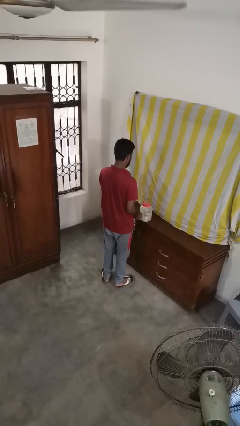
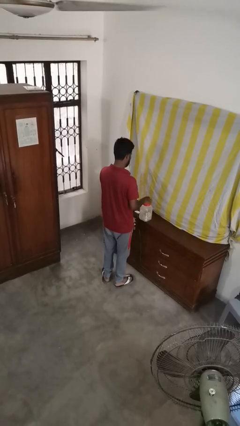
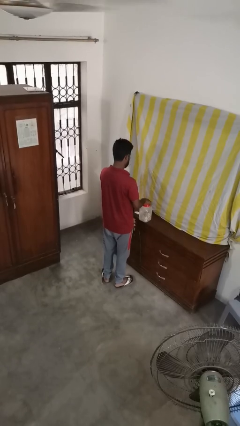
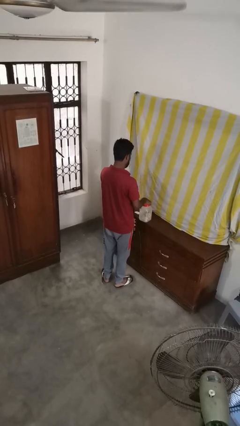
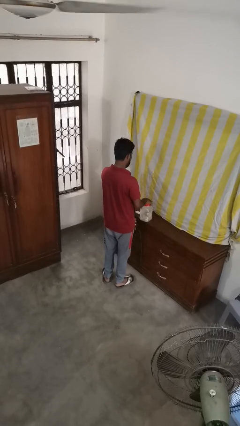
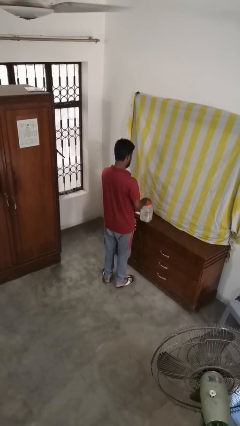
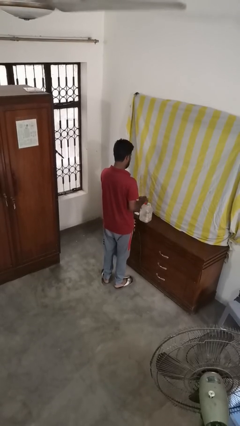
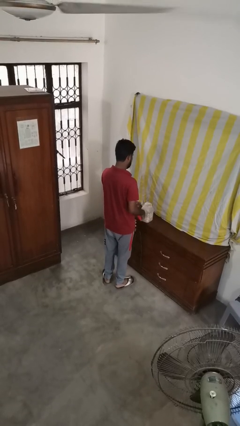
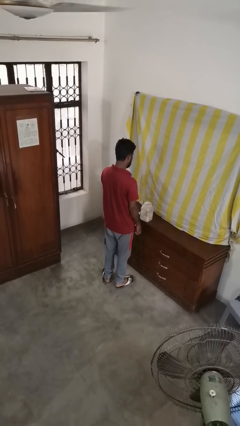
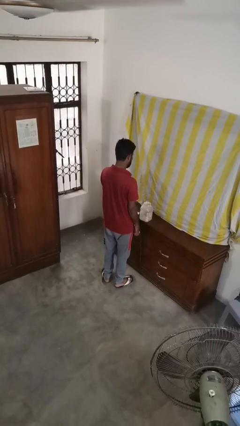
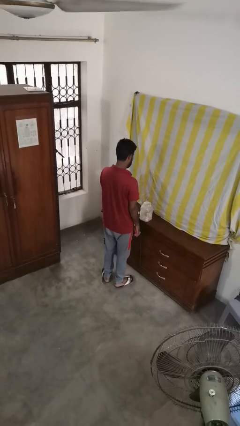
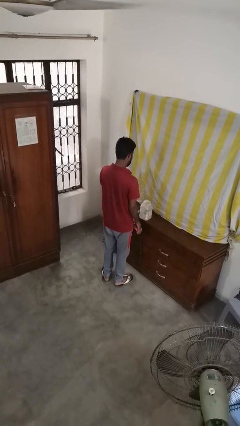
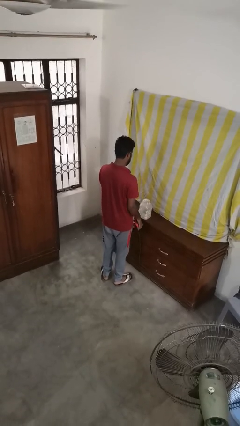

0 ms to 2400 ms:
person opens jar

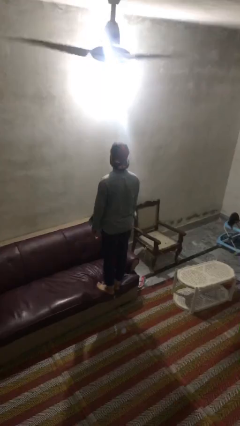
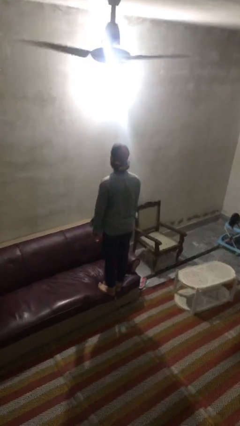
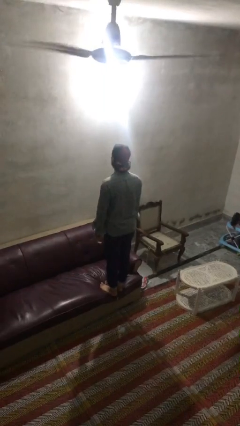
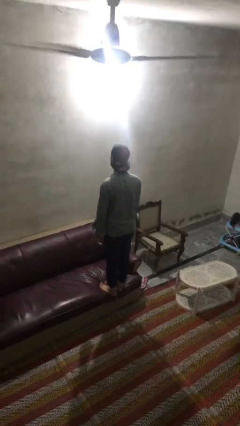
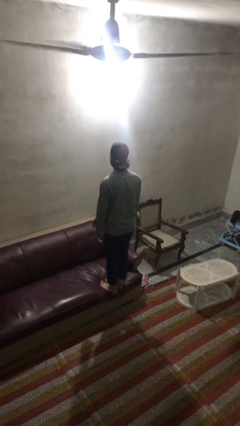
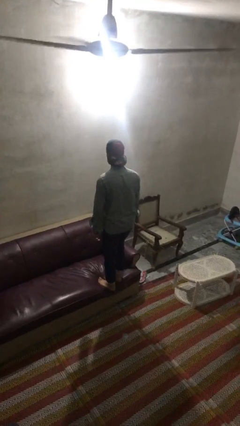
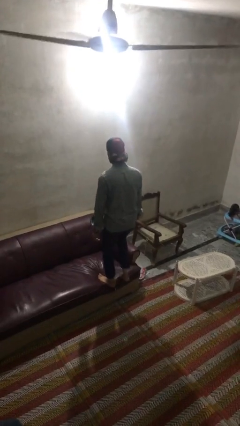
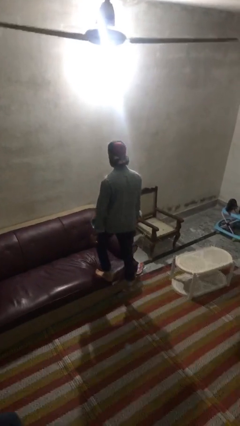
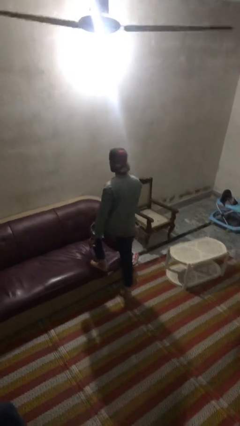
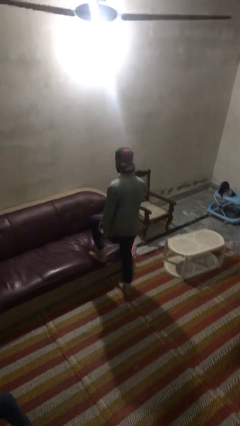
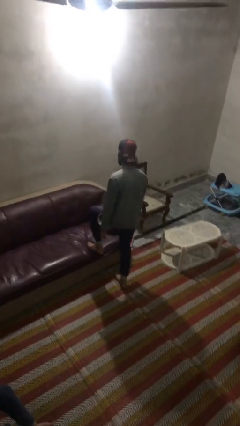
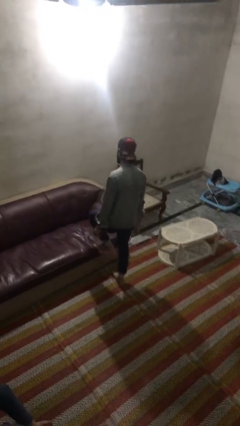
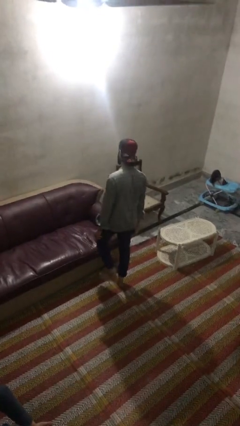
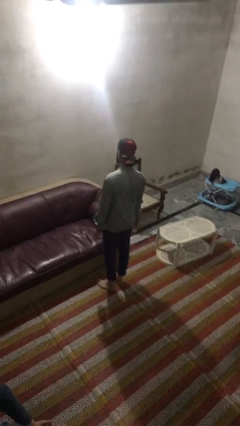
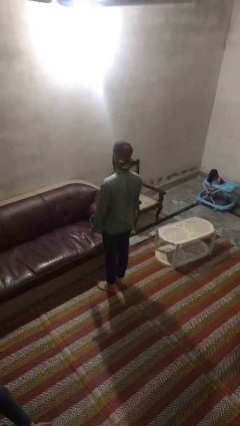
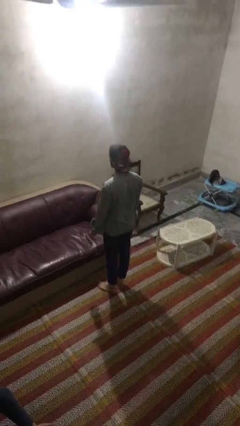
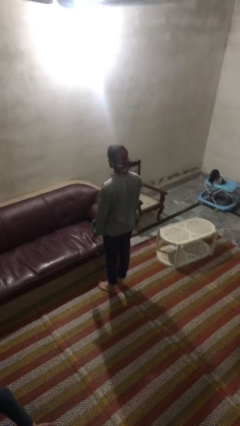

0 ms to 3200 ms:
person climbs off couch

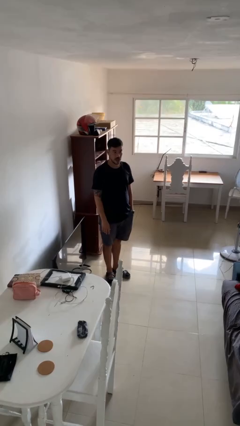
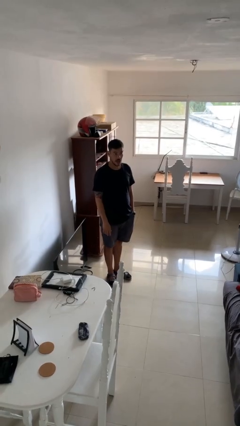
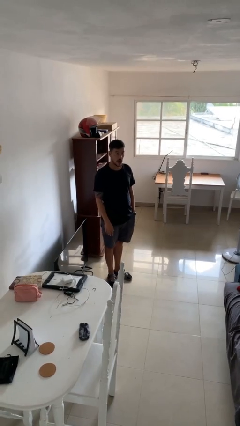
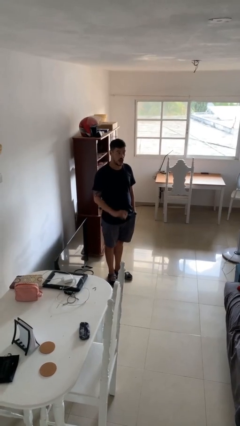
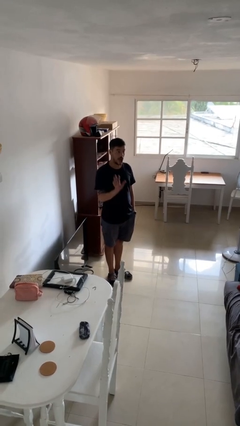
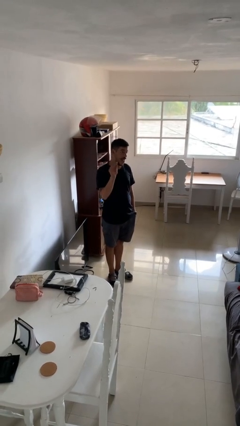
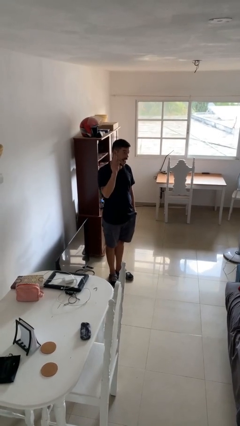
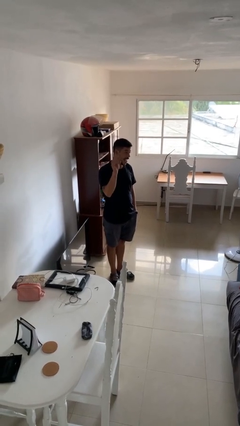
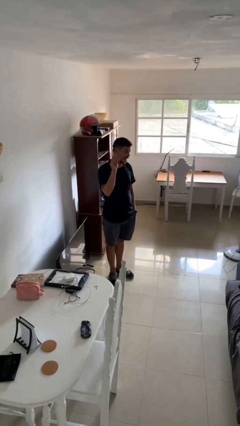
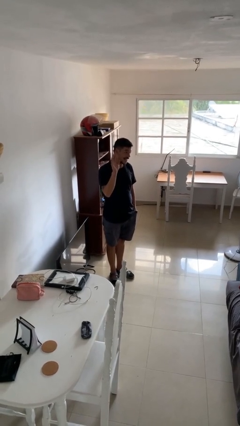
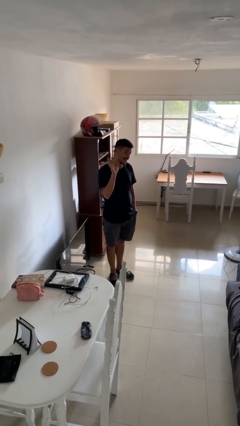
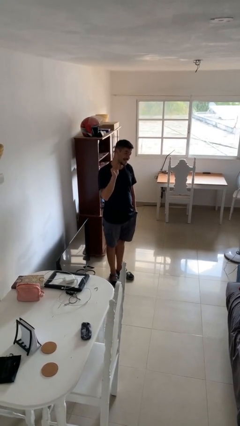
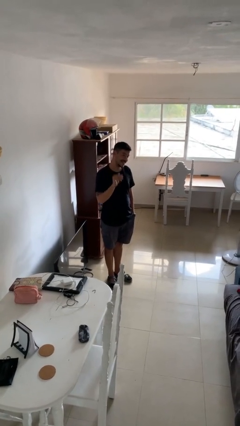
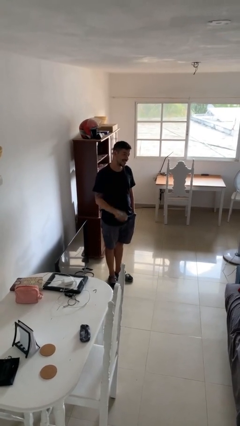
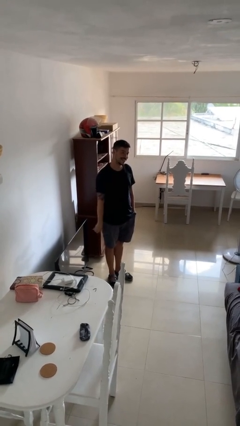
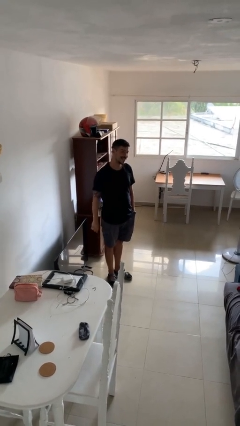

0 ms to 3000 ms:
person waves at person

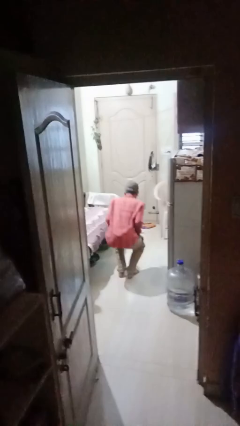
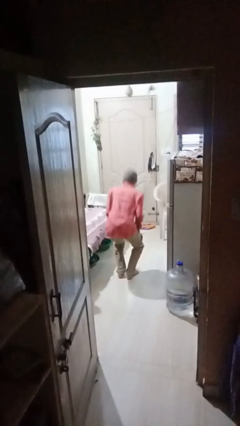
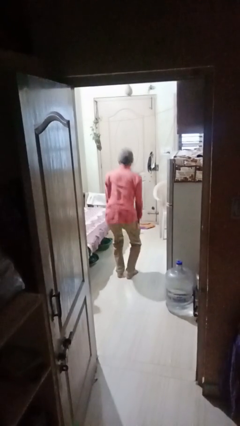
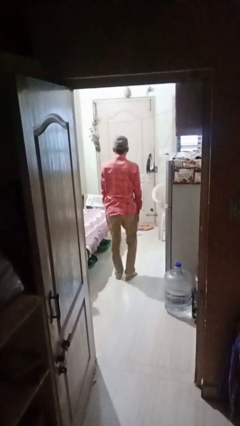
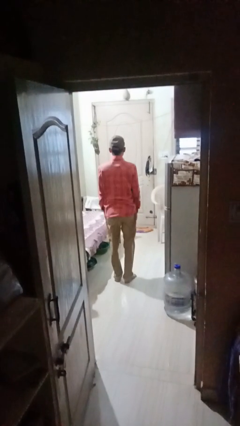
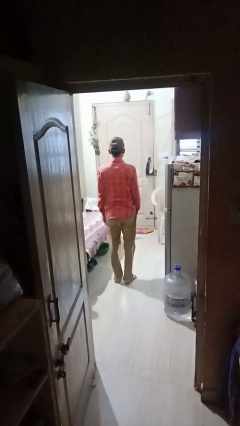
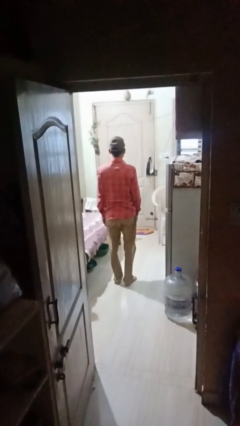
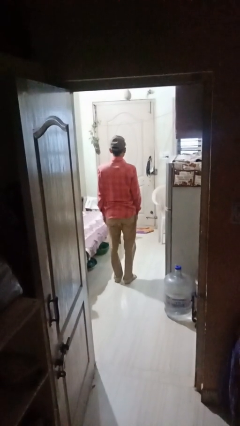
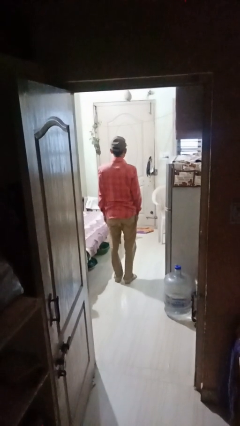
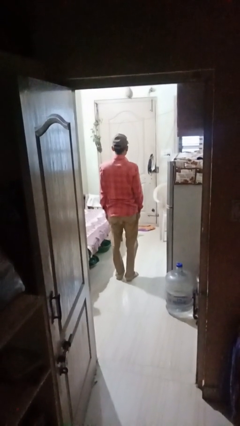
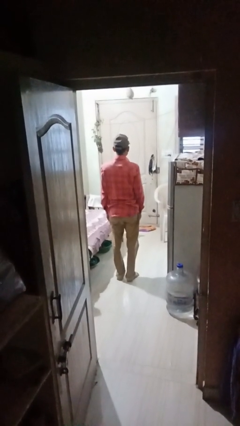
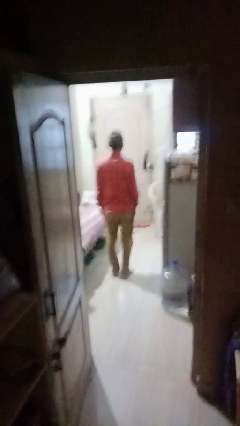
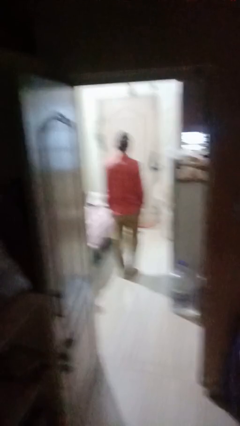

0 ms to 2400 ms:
person stands up

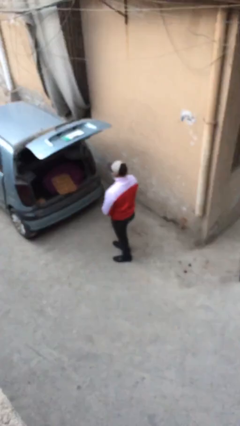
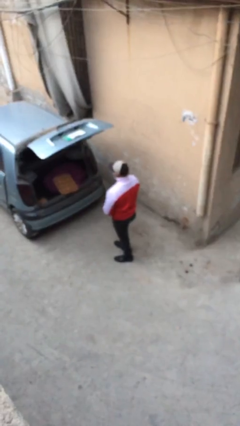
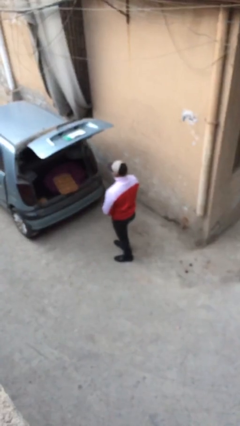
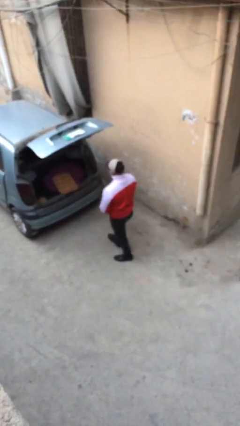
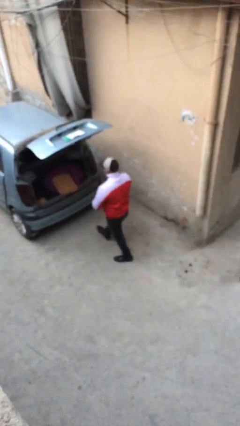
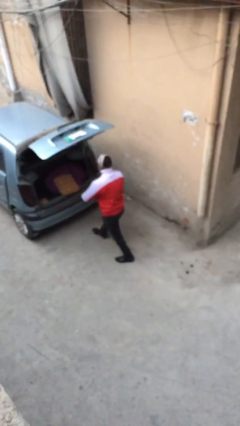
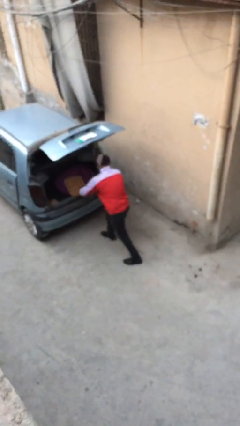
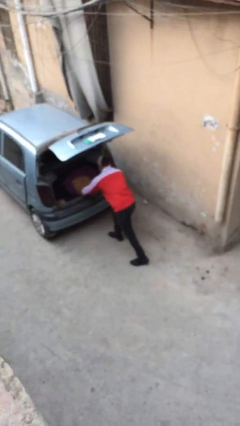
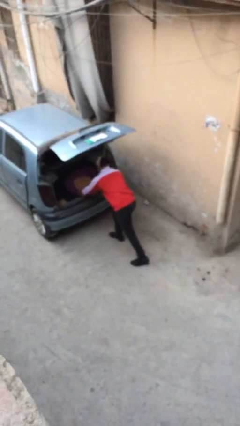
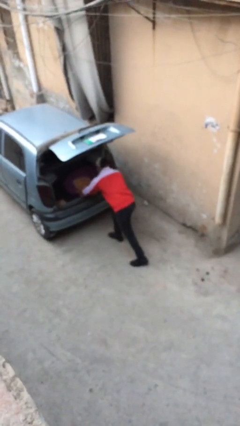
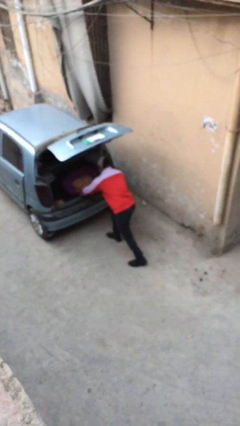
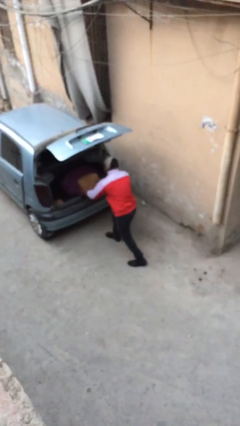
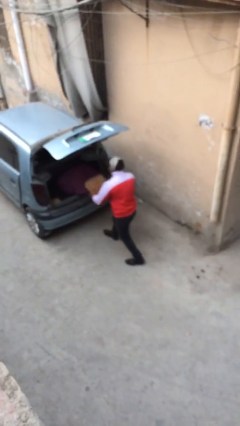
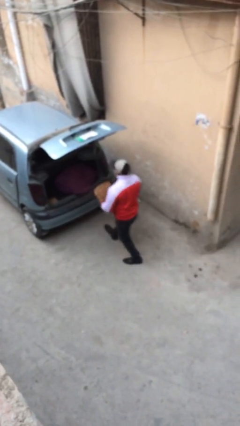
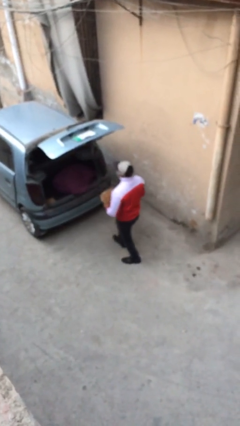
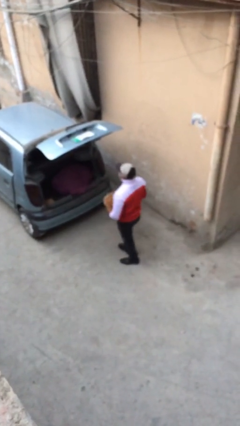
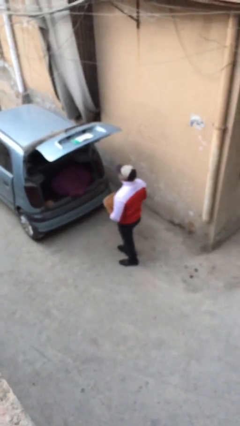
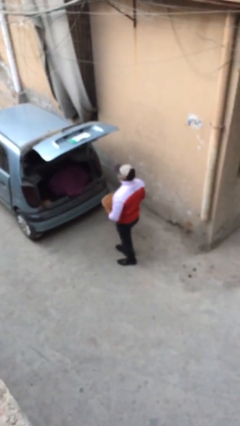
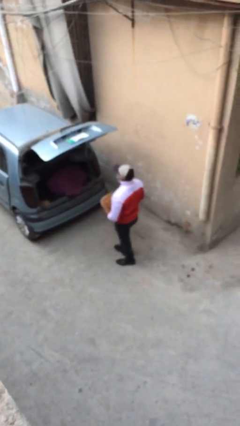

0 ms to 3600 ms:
person unloads car

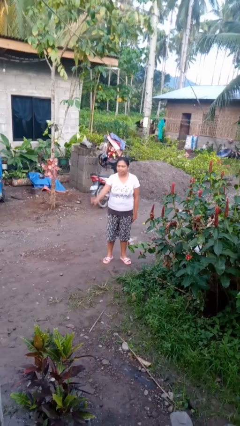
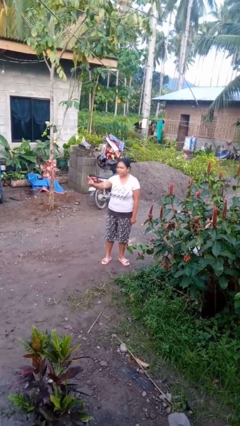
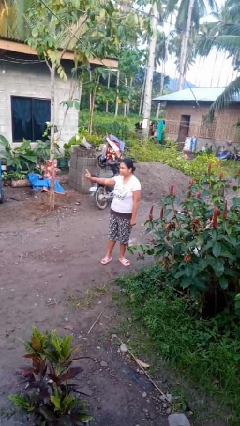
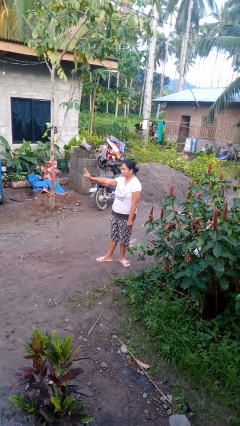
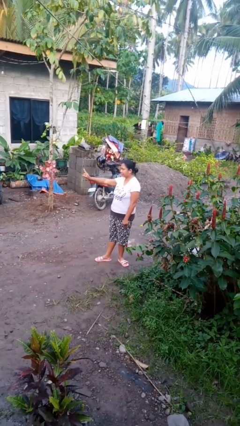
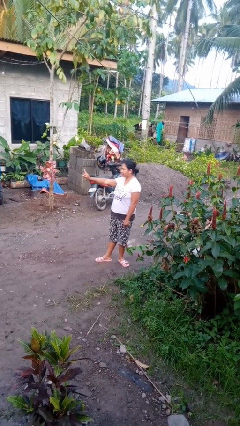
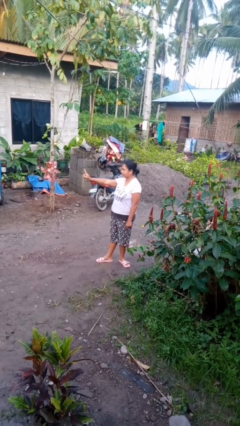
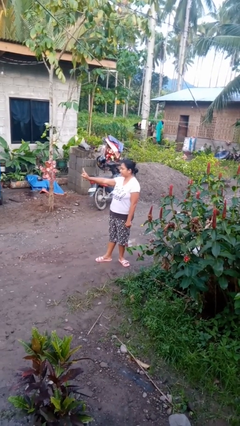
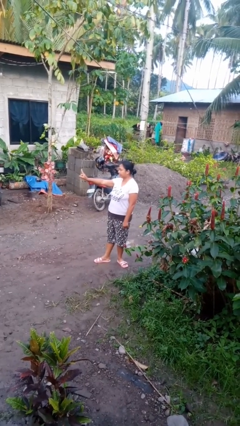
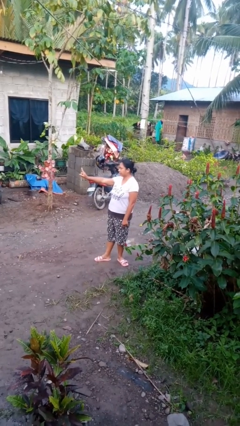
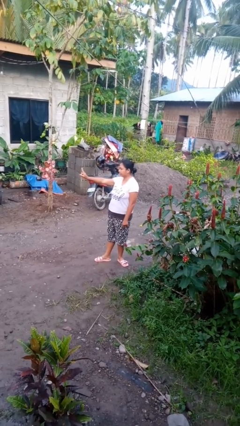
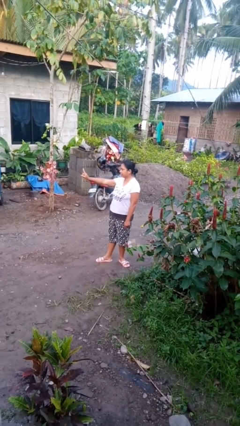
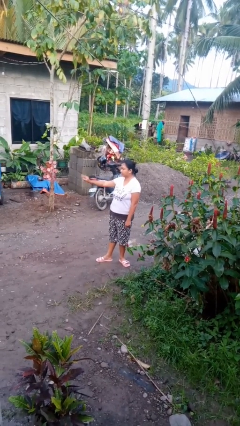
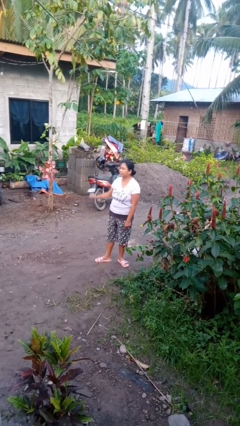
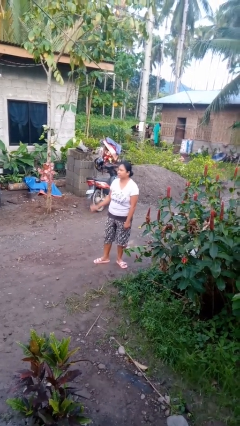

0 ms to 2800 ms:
person gestures number one
